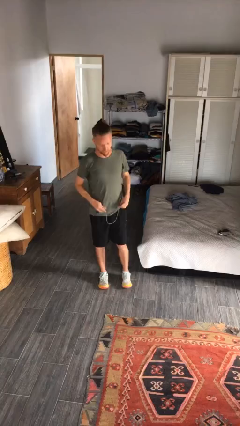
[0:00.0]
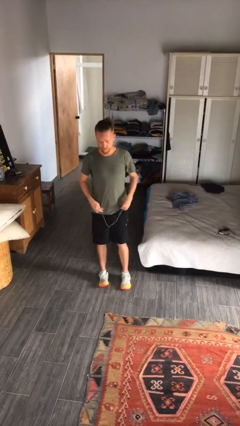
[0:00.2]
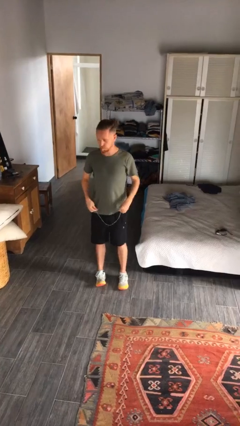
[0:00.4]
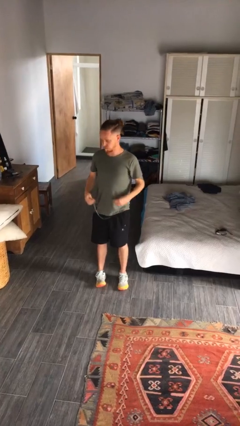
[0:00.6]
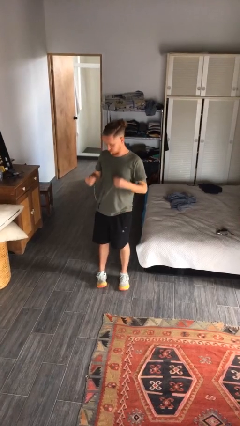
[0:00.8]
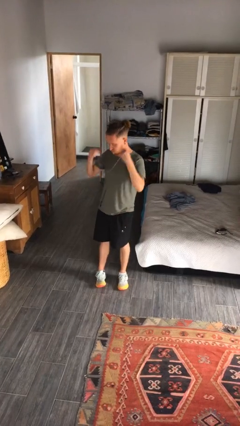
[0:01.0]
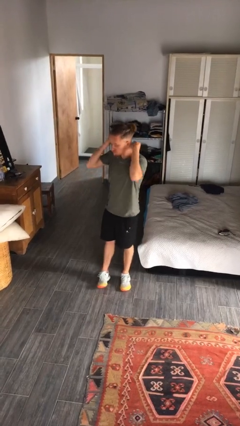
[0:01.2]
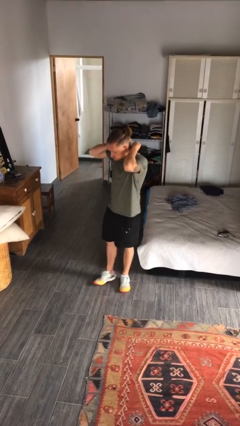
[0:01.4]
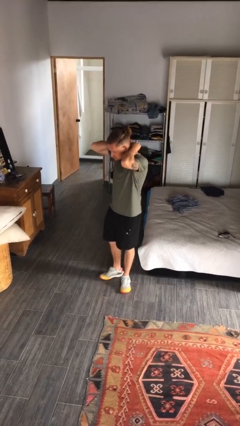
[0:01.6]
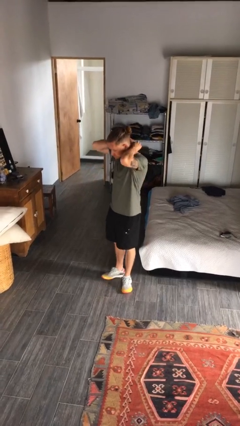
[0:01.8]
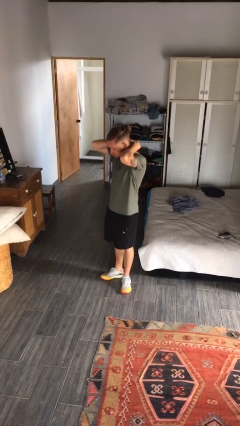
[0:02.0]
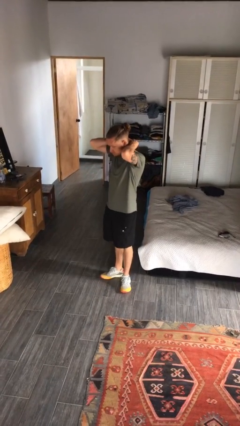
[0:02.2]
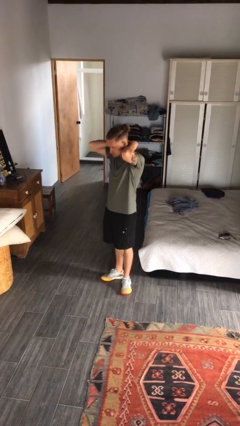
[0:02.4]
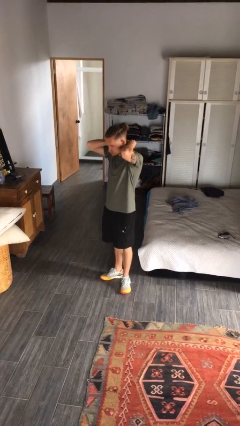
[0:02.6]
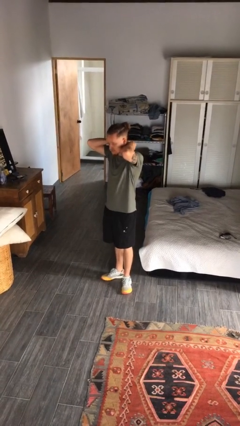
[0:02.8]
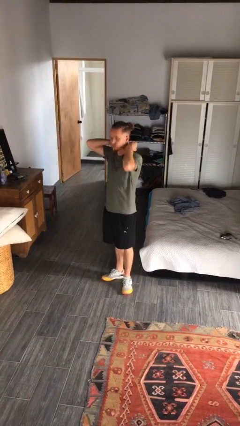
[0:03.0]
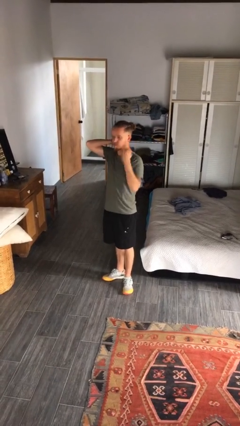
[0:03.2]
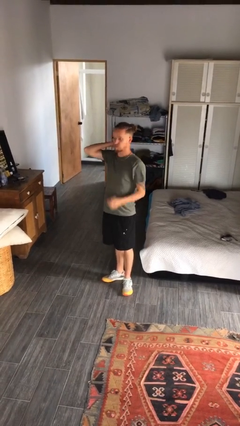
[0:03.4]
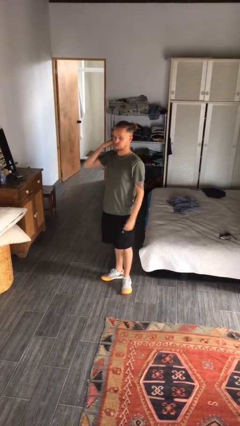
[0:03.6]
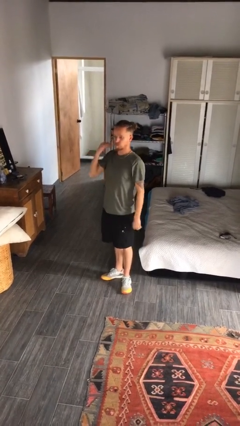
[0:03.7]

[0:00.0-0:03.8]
person puts on necklace

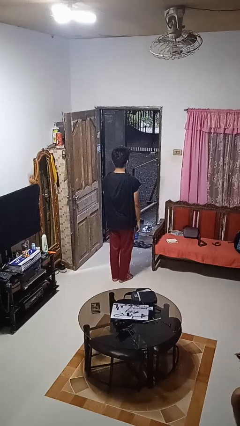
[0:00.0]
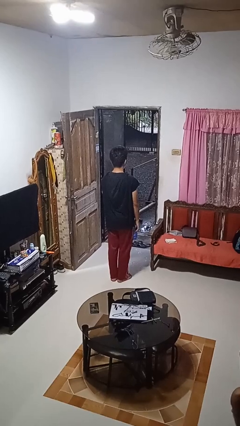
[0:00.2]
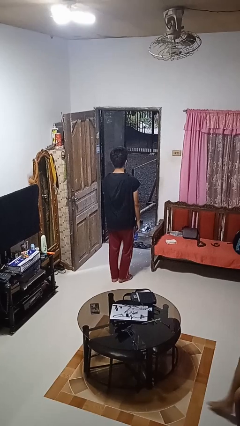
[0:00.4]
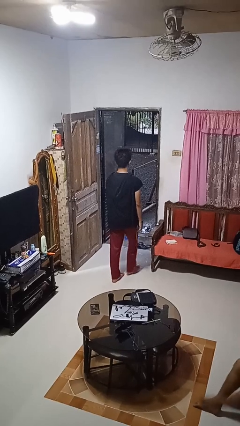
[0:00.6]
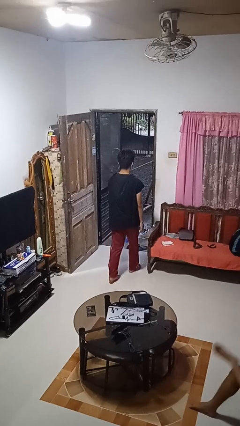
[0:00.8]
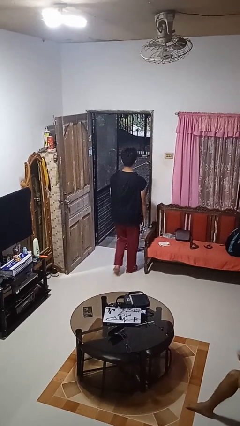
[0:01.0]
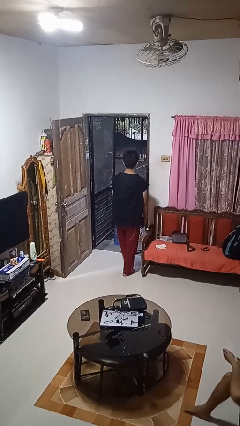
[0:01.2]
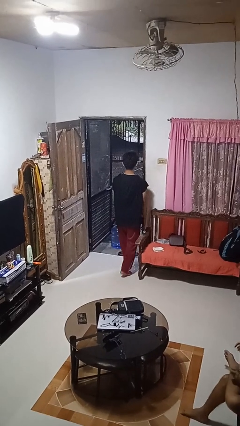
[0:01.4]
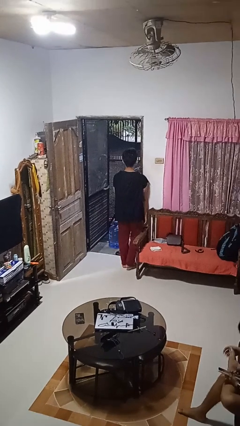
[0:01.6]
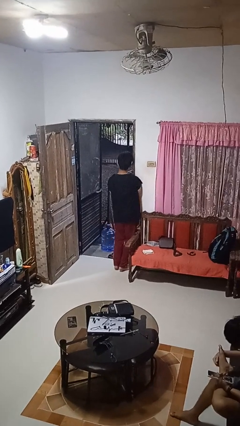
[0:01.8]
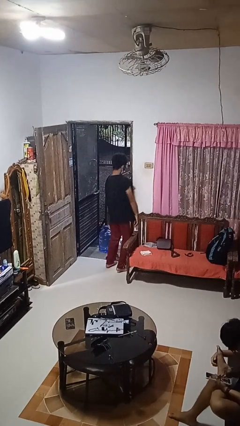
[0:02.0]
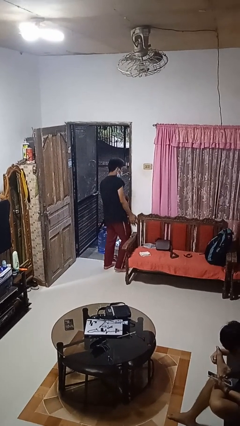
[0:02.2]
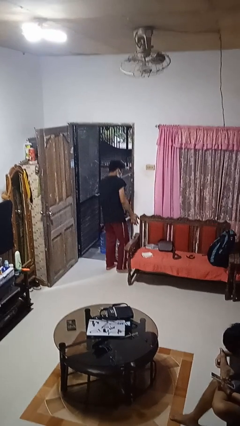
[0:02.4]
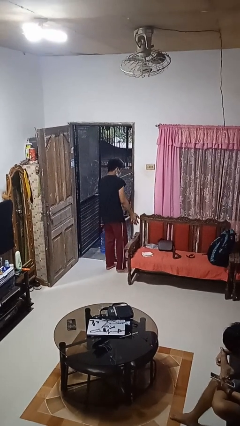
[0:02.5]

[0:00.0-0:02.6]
person bumps into wall

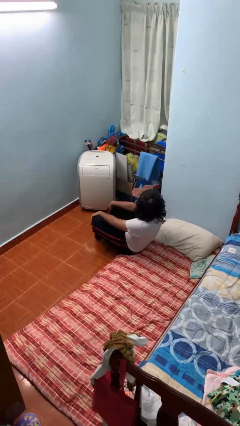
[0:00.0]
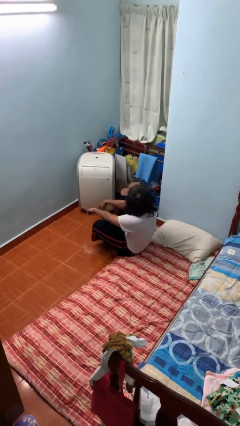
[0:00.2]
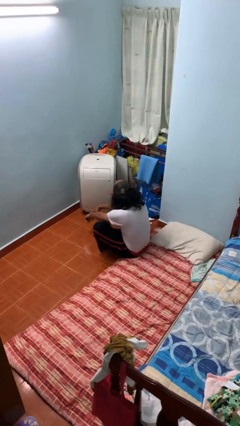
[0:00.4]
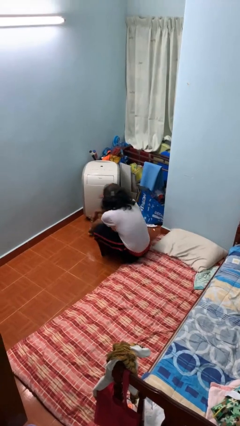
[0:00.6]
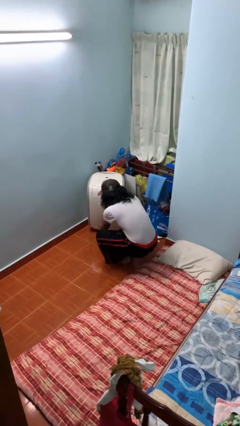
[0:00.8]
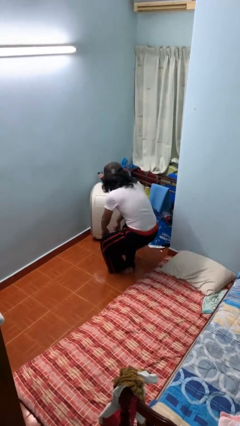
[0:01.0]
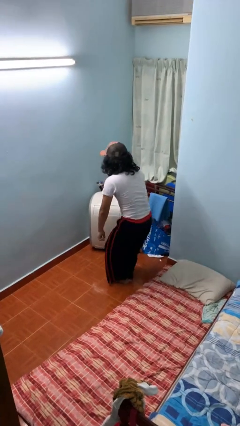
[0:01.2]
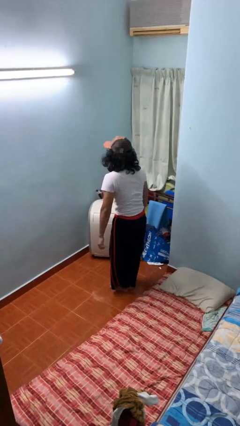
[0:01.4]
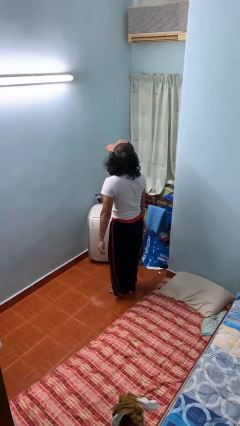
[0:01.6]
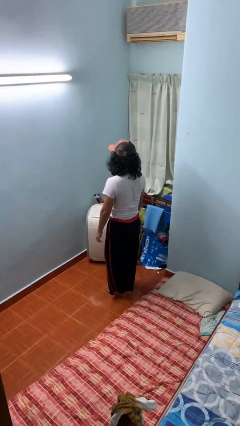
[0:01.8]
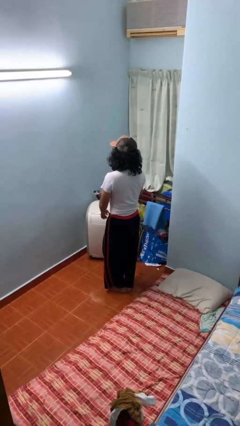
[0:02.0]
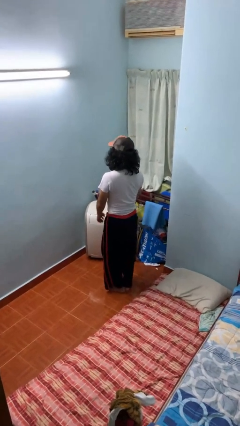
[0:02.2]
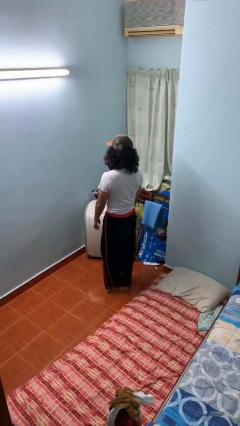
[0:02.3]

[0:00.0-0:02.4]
person stands up from floor

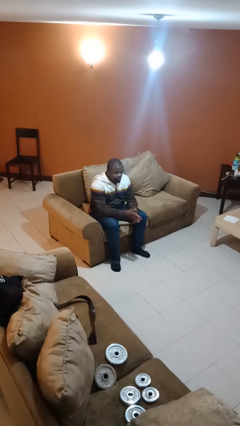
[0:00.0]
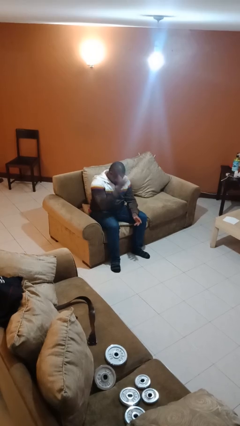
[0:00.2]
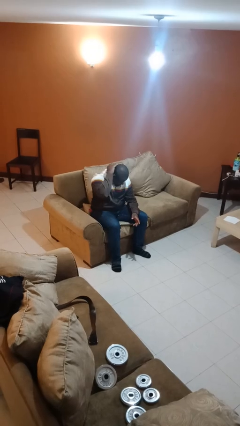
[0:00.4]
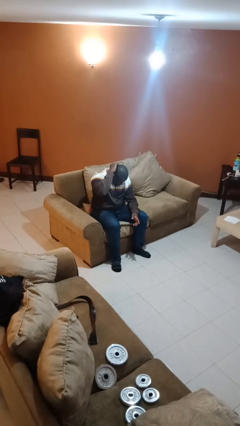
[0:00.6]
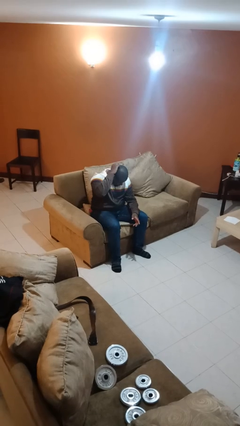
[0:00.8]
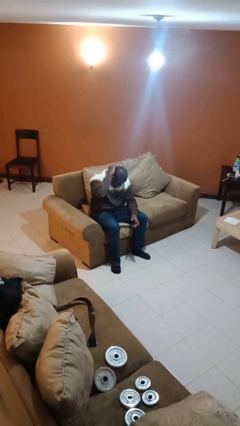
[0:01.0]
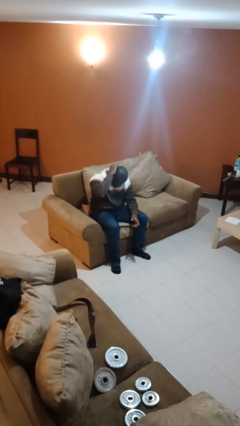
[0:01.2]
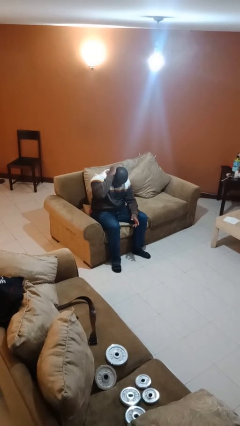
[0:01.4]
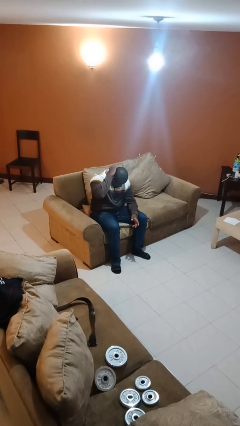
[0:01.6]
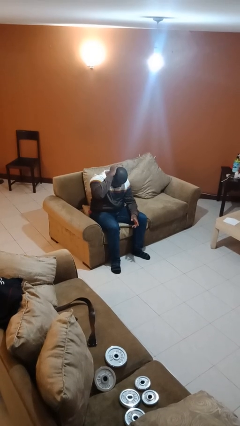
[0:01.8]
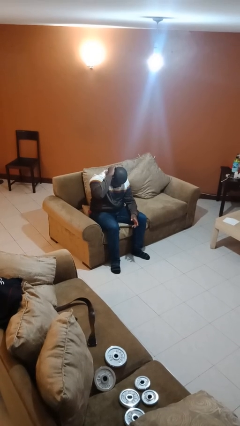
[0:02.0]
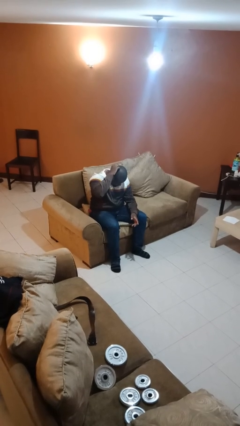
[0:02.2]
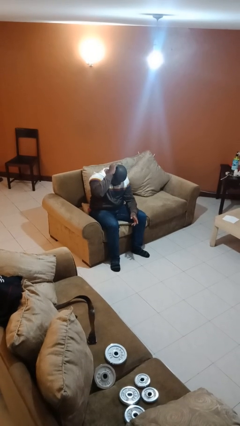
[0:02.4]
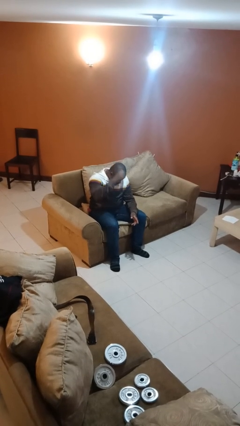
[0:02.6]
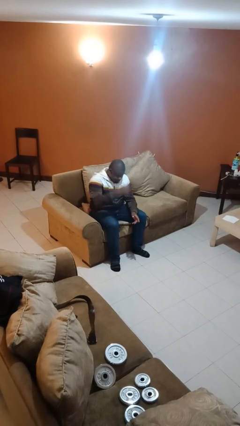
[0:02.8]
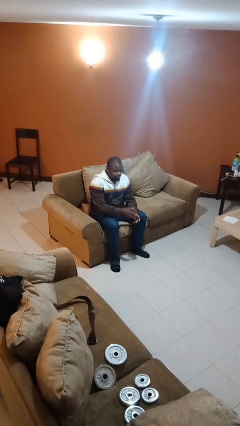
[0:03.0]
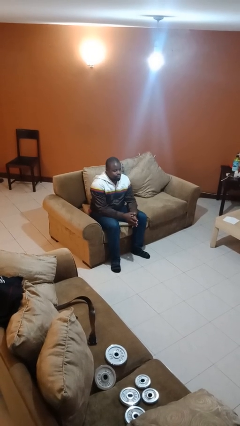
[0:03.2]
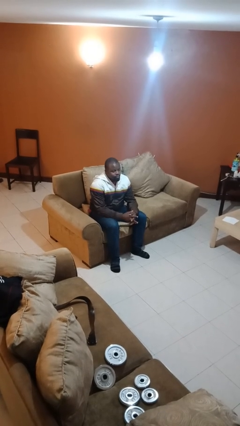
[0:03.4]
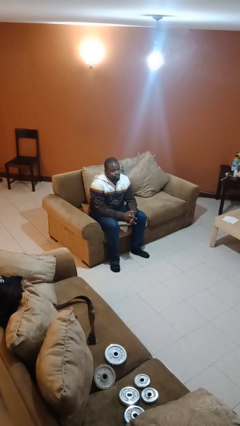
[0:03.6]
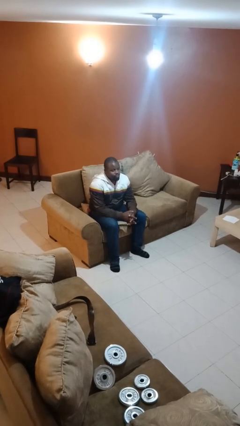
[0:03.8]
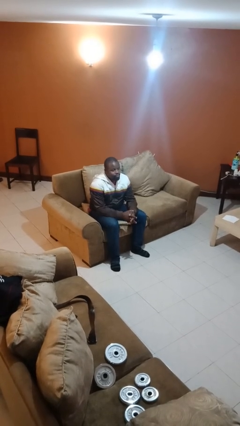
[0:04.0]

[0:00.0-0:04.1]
person scratches face

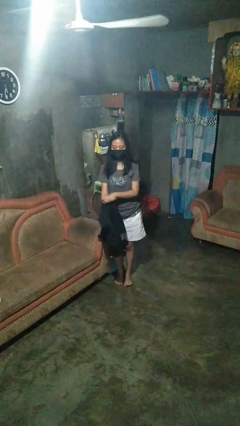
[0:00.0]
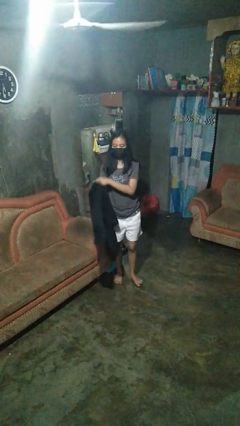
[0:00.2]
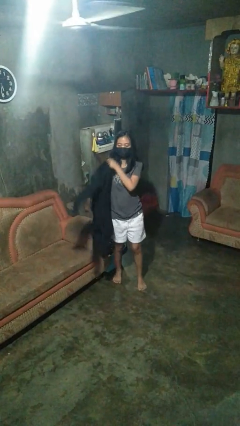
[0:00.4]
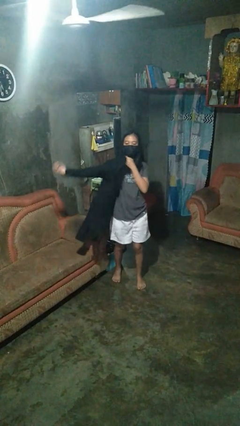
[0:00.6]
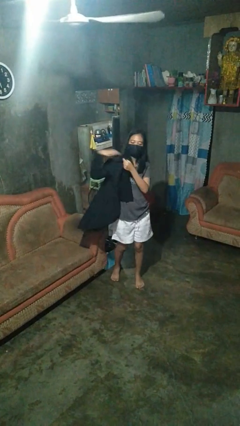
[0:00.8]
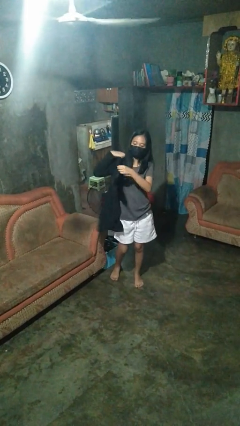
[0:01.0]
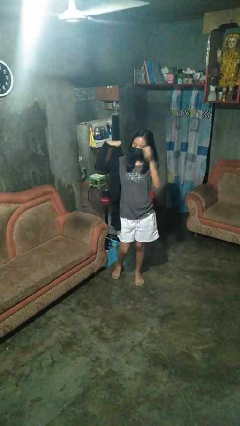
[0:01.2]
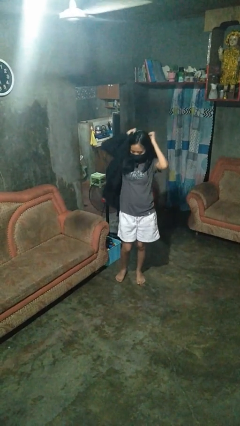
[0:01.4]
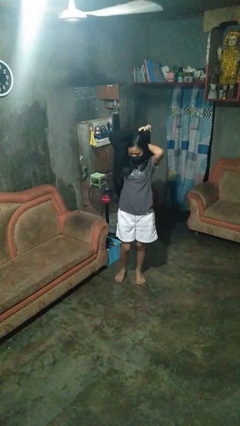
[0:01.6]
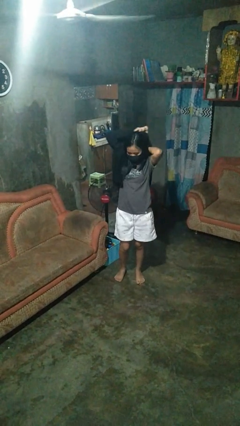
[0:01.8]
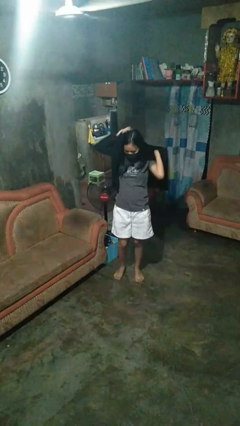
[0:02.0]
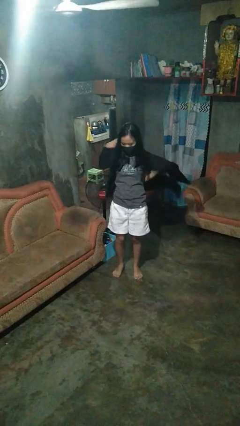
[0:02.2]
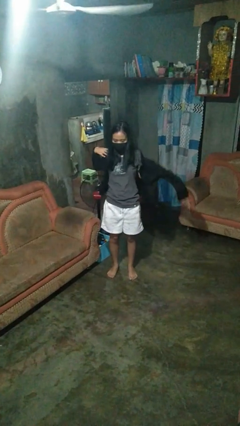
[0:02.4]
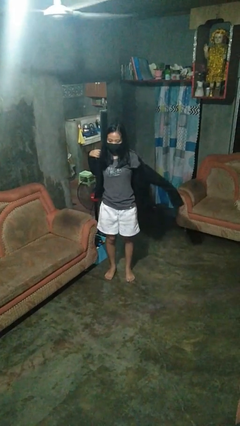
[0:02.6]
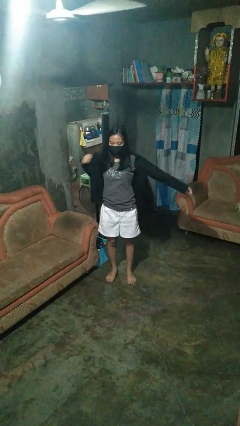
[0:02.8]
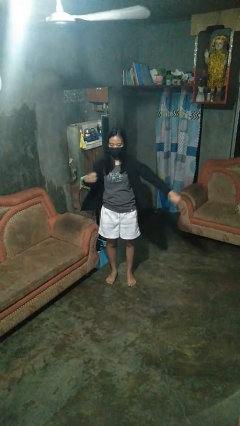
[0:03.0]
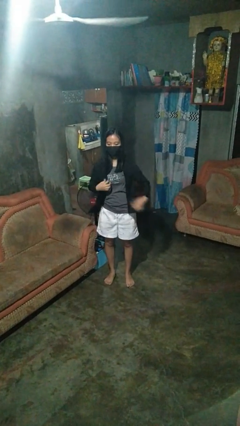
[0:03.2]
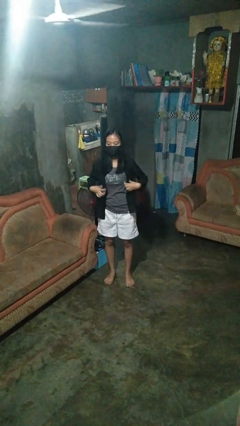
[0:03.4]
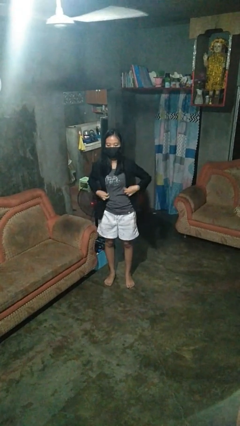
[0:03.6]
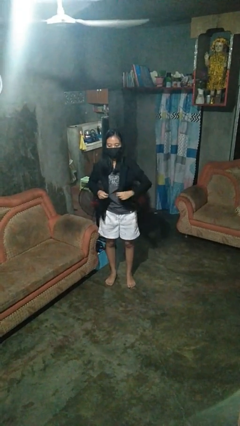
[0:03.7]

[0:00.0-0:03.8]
person puts on shirt

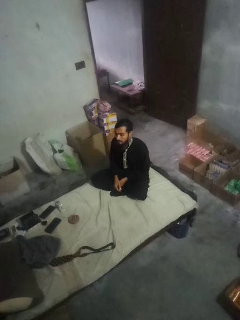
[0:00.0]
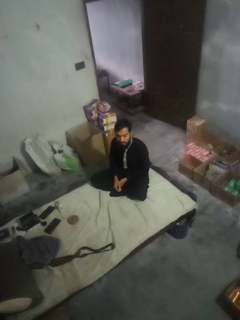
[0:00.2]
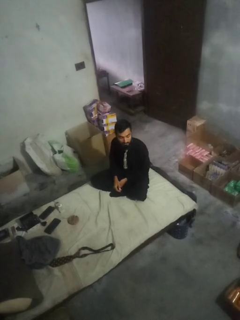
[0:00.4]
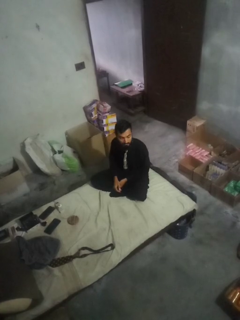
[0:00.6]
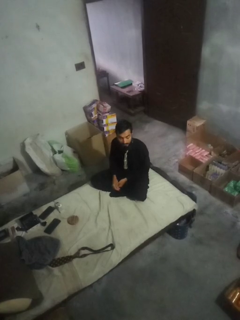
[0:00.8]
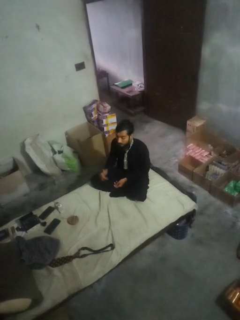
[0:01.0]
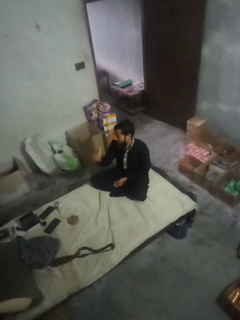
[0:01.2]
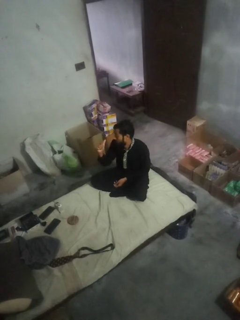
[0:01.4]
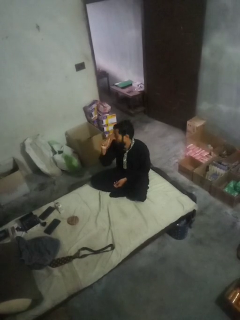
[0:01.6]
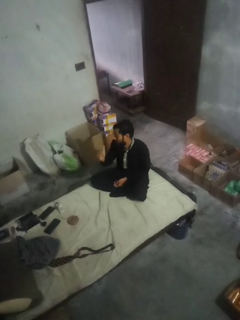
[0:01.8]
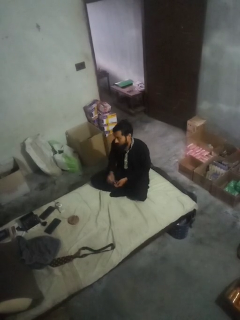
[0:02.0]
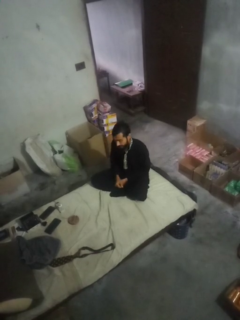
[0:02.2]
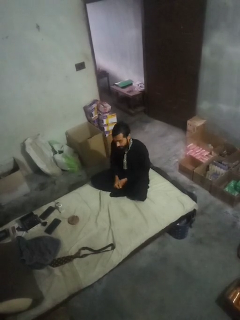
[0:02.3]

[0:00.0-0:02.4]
person gestures behind me
